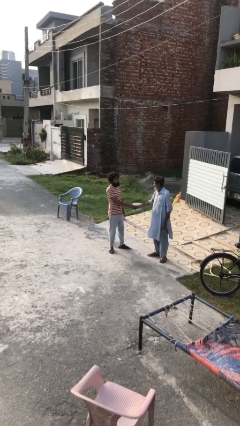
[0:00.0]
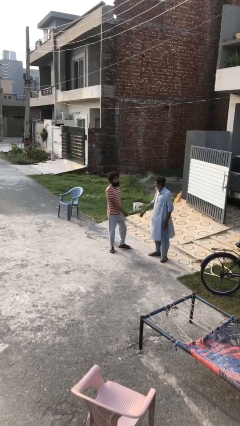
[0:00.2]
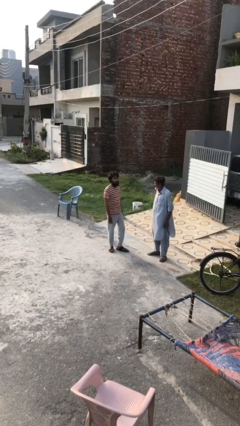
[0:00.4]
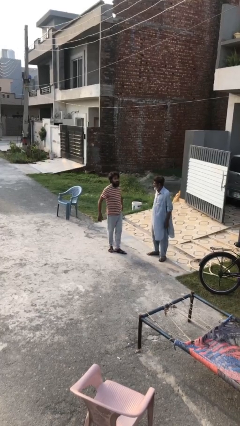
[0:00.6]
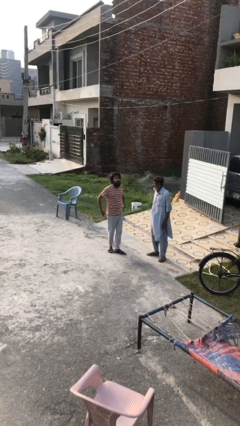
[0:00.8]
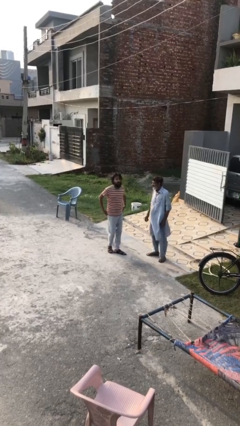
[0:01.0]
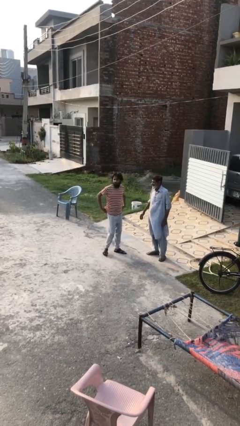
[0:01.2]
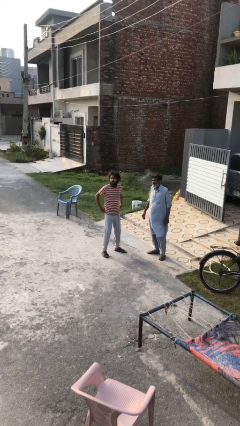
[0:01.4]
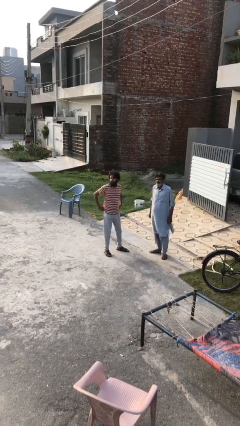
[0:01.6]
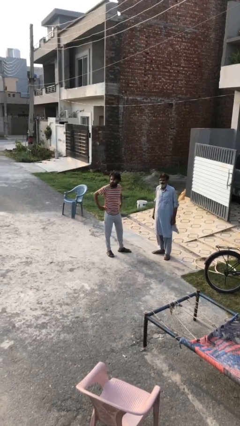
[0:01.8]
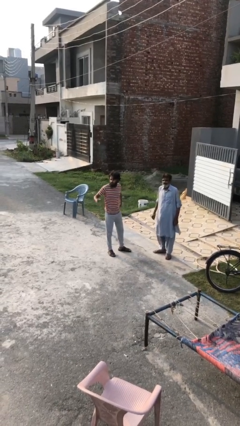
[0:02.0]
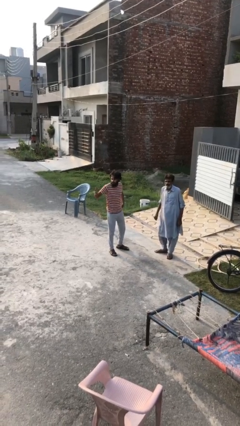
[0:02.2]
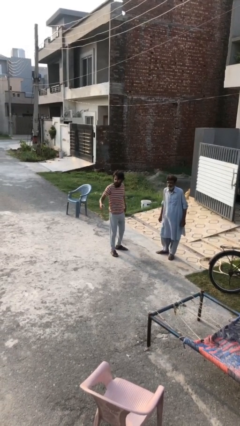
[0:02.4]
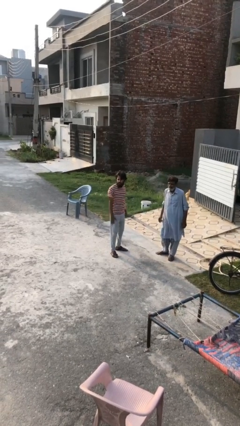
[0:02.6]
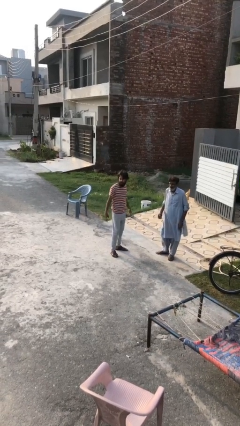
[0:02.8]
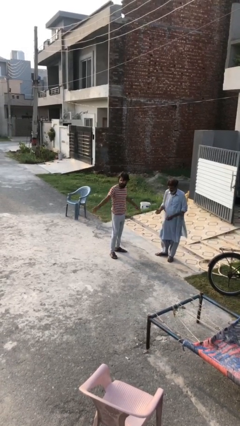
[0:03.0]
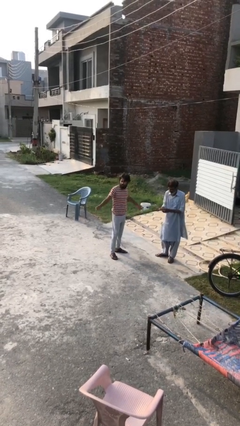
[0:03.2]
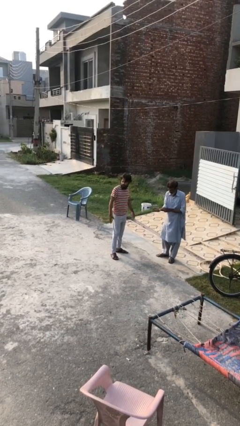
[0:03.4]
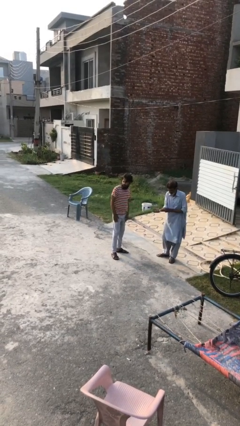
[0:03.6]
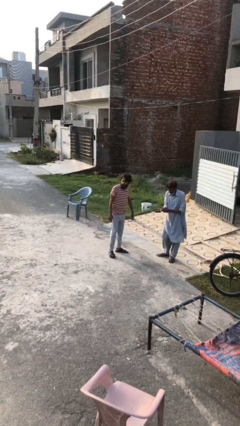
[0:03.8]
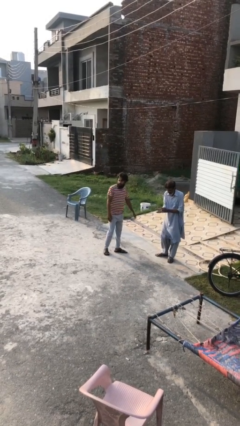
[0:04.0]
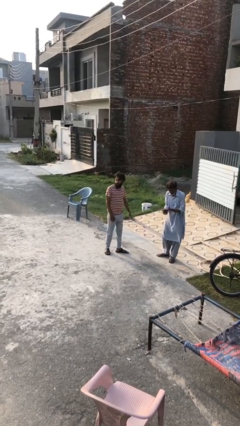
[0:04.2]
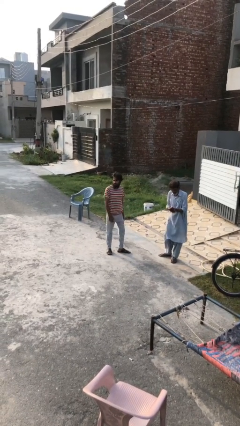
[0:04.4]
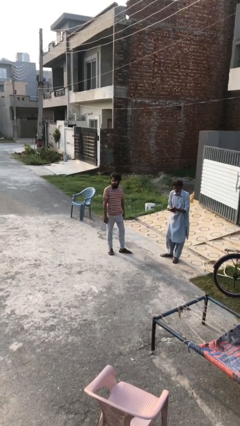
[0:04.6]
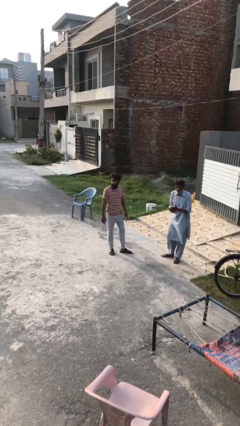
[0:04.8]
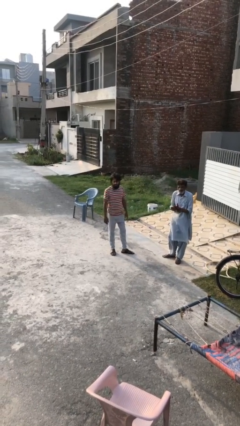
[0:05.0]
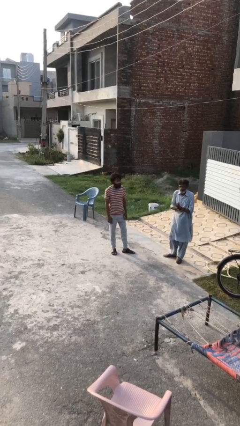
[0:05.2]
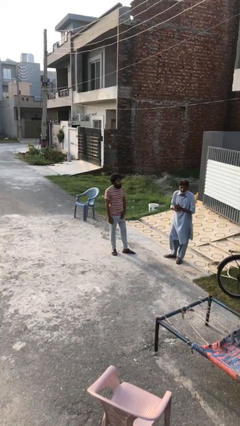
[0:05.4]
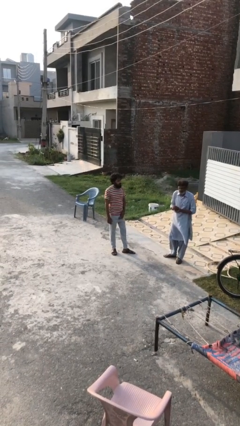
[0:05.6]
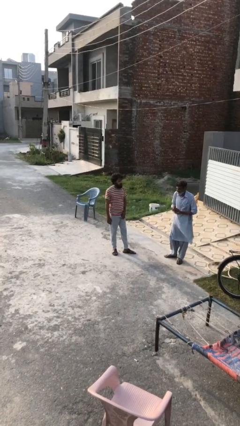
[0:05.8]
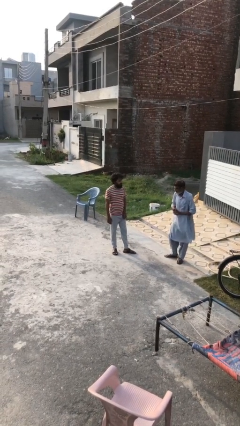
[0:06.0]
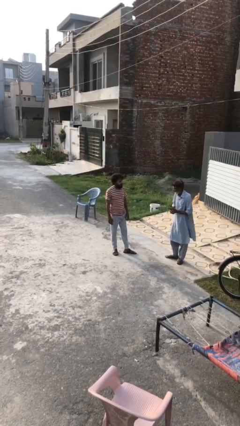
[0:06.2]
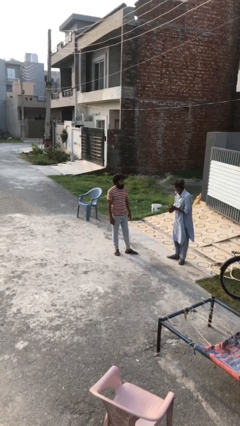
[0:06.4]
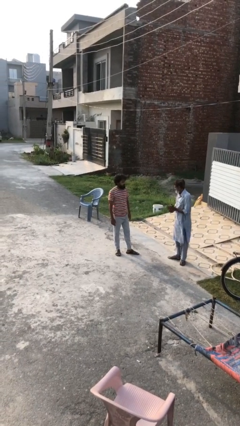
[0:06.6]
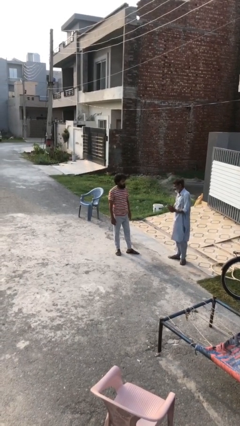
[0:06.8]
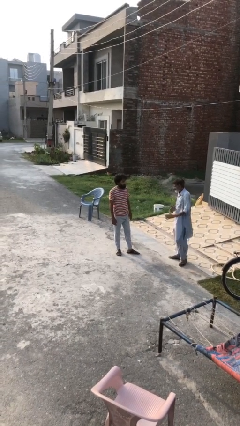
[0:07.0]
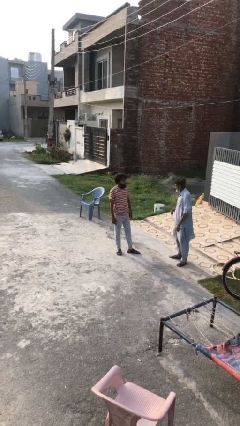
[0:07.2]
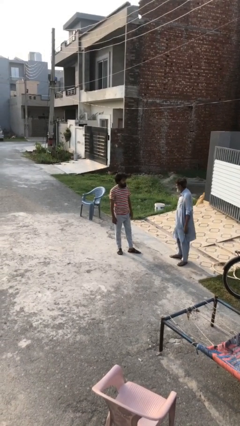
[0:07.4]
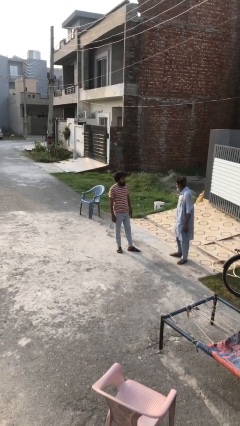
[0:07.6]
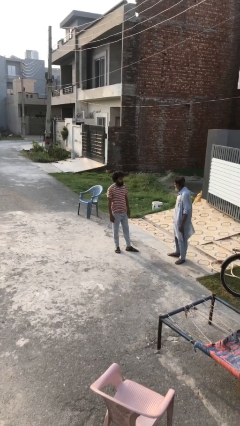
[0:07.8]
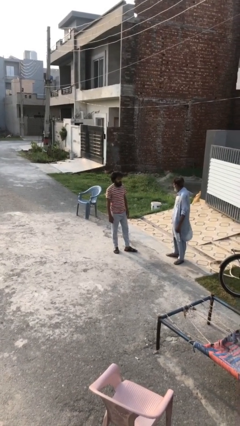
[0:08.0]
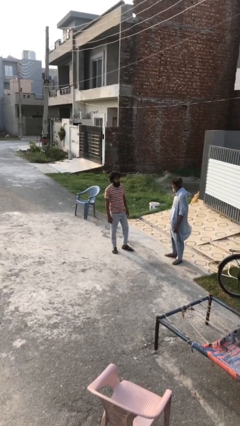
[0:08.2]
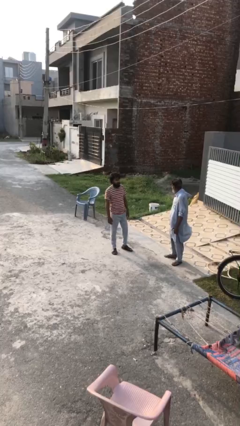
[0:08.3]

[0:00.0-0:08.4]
person talks to person

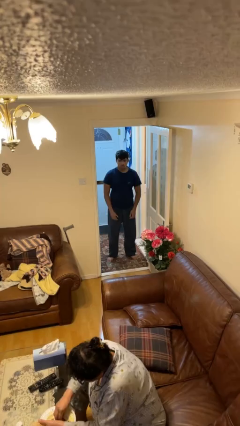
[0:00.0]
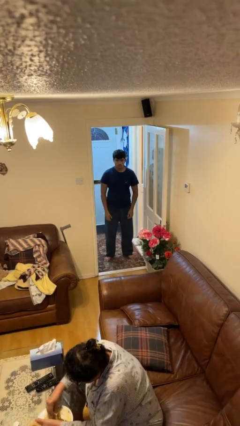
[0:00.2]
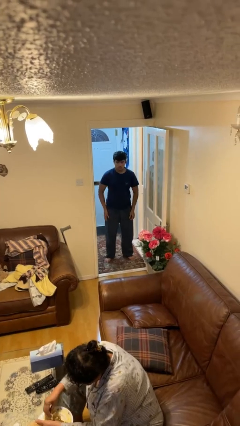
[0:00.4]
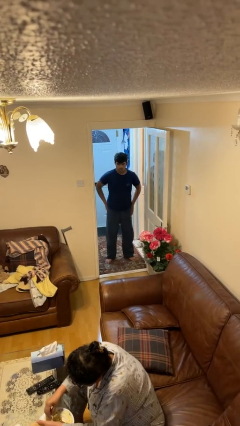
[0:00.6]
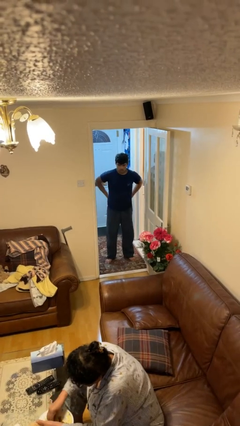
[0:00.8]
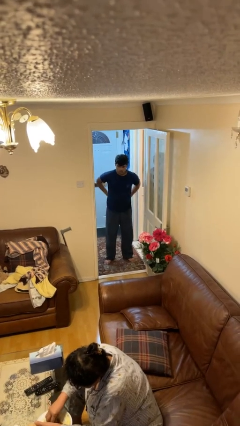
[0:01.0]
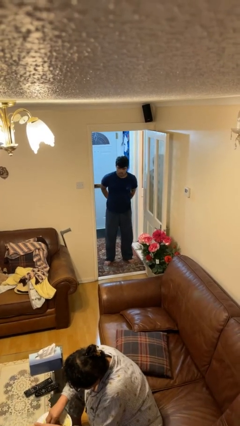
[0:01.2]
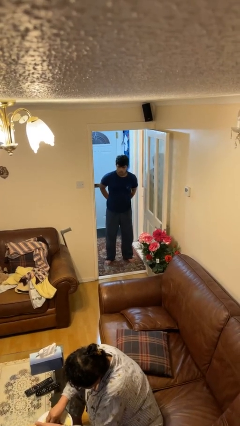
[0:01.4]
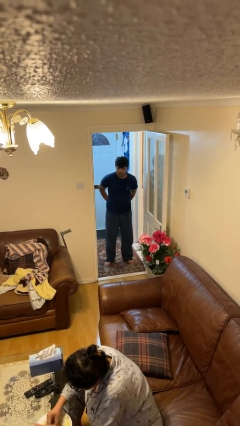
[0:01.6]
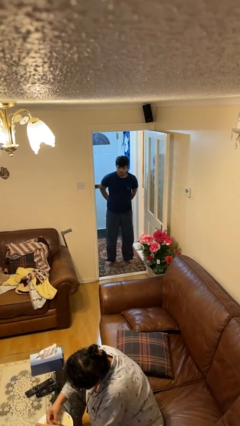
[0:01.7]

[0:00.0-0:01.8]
person puts hands in back pockets

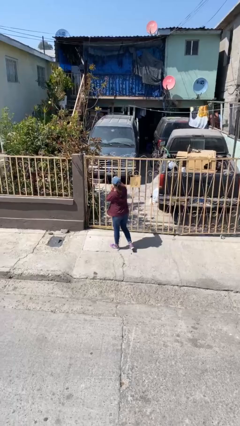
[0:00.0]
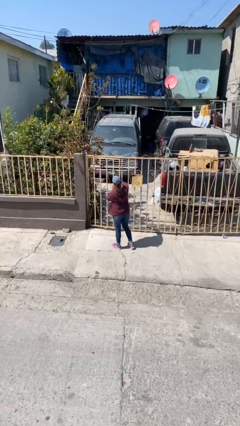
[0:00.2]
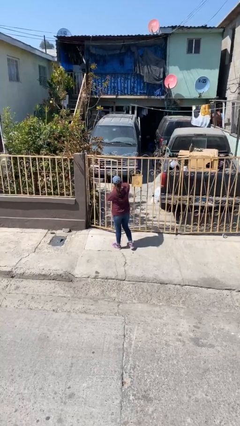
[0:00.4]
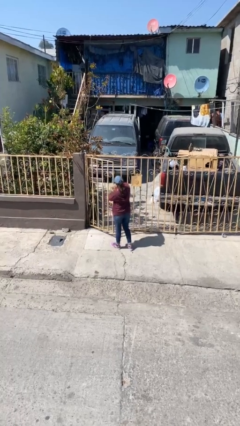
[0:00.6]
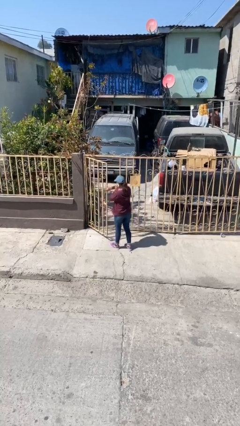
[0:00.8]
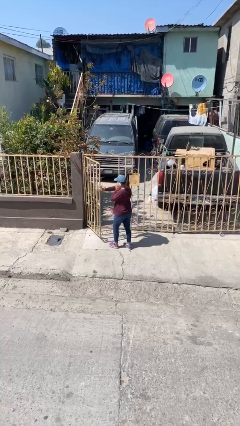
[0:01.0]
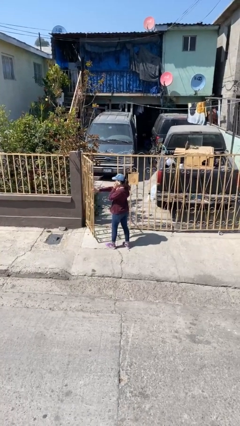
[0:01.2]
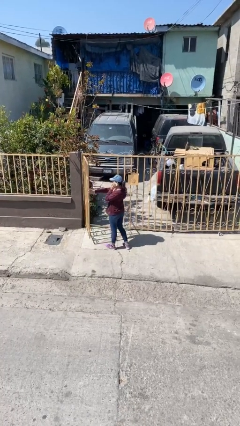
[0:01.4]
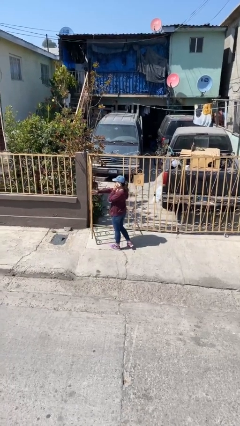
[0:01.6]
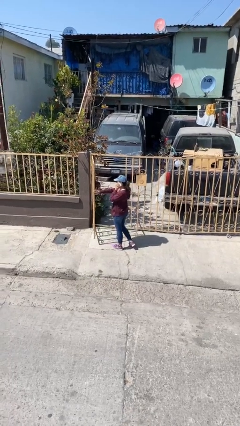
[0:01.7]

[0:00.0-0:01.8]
person opens facility door

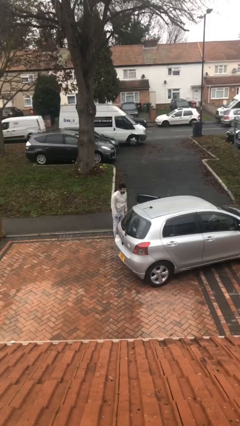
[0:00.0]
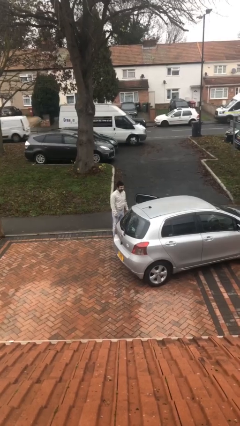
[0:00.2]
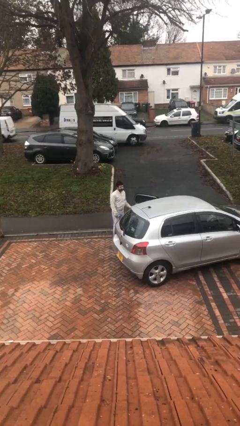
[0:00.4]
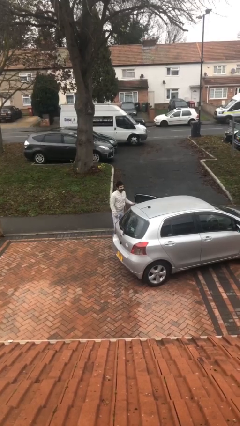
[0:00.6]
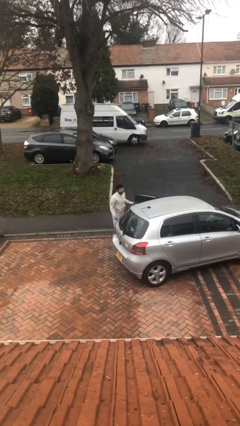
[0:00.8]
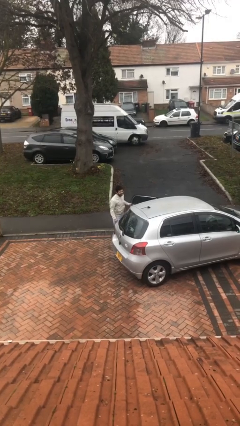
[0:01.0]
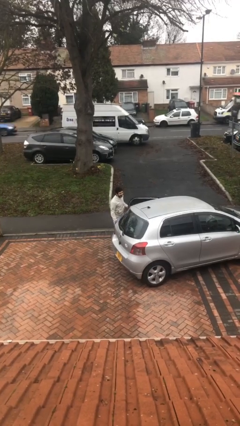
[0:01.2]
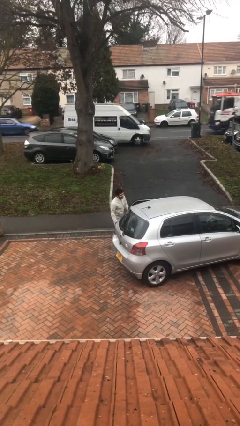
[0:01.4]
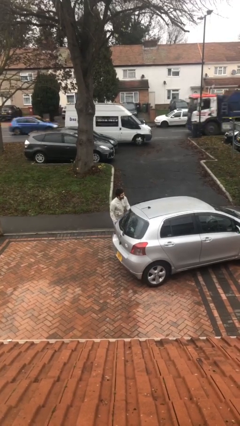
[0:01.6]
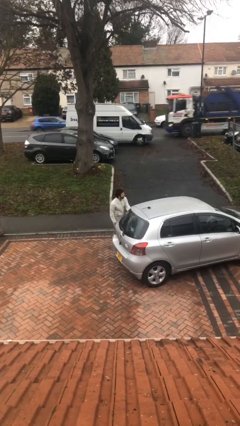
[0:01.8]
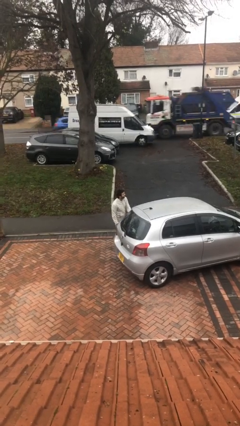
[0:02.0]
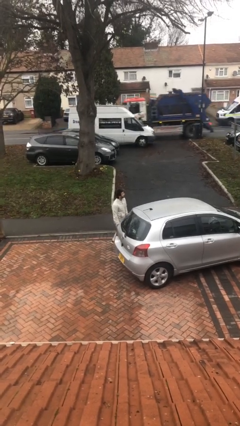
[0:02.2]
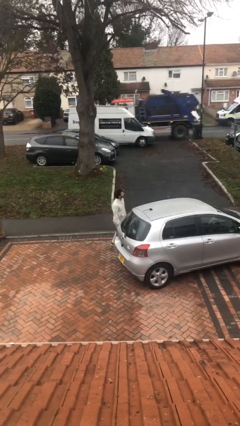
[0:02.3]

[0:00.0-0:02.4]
person closes car door

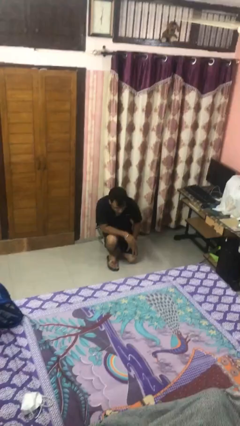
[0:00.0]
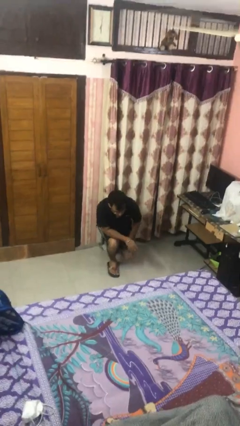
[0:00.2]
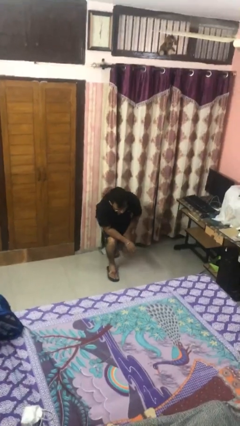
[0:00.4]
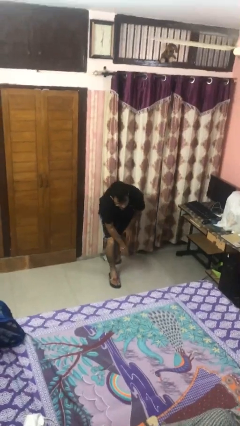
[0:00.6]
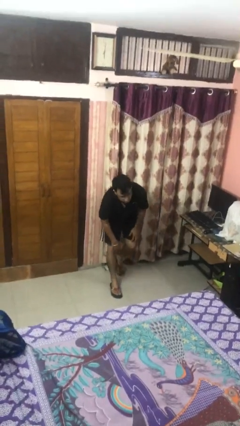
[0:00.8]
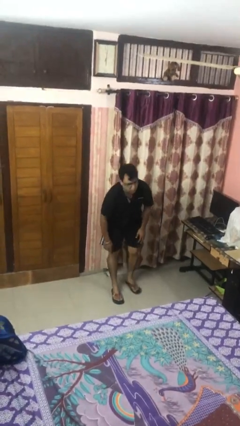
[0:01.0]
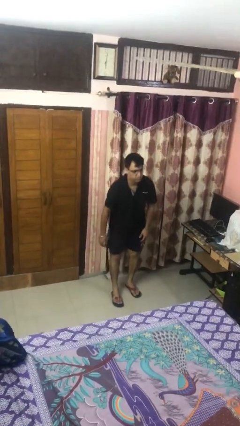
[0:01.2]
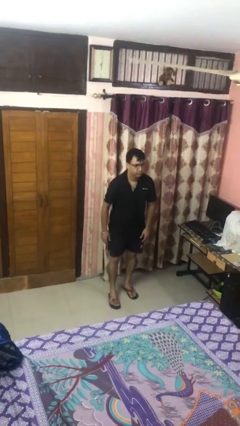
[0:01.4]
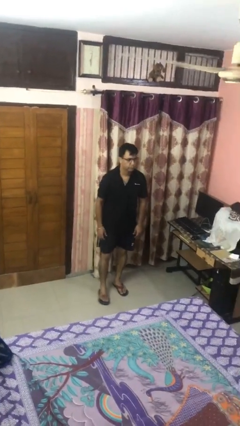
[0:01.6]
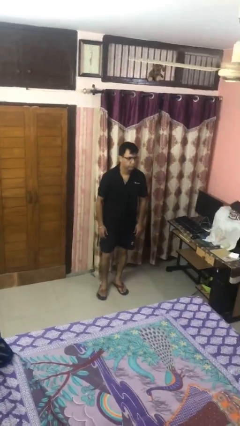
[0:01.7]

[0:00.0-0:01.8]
person stands up from floor

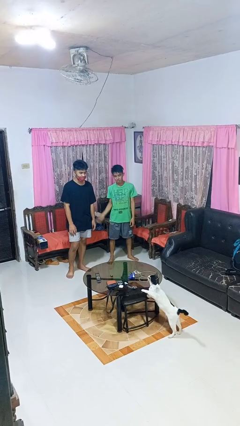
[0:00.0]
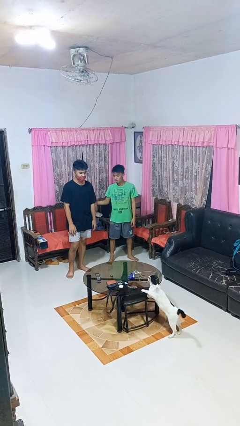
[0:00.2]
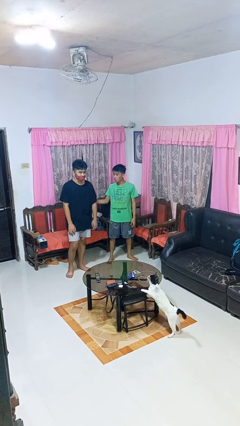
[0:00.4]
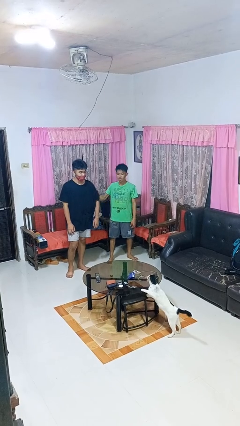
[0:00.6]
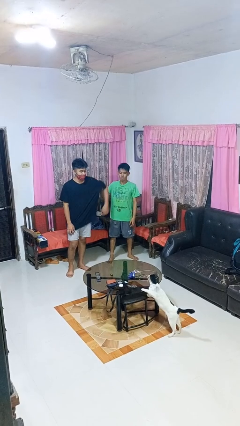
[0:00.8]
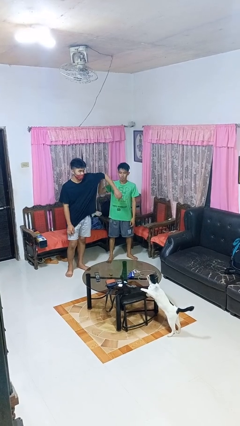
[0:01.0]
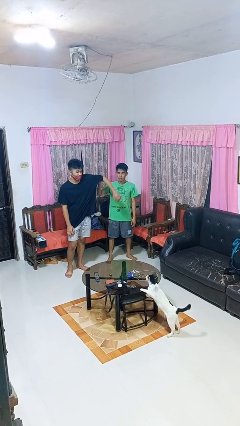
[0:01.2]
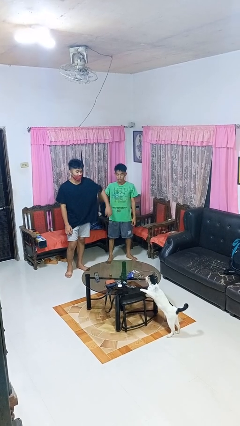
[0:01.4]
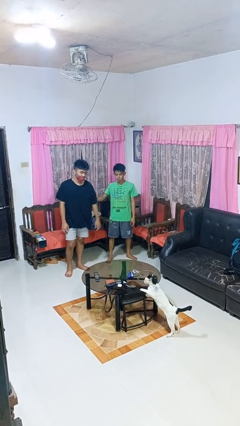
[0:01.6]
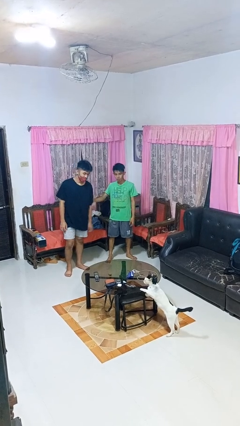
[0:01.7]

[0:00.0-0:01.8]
person grabs person by bicep
